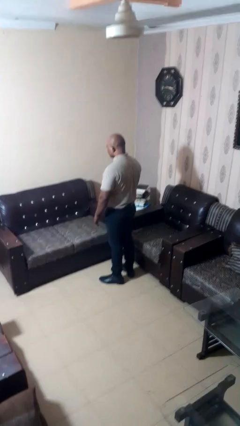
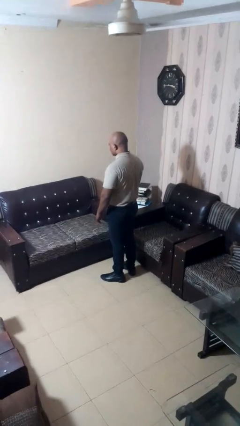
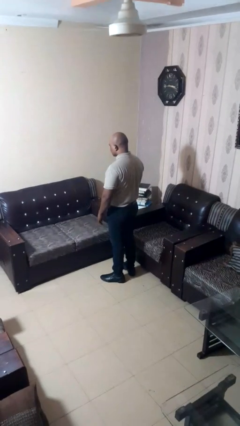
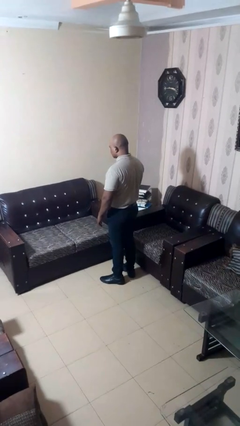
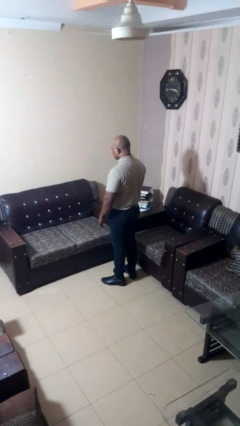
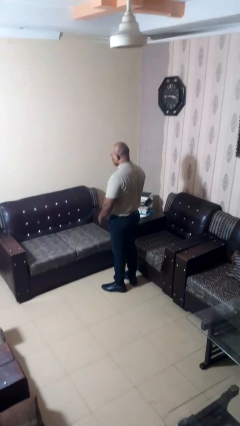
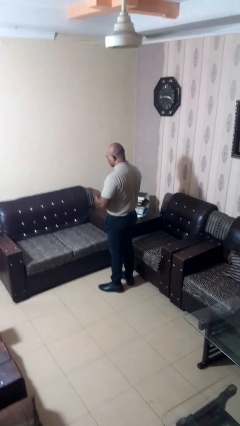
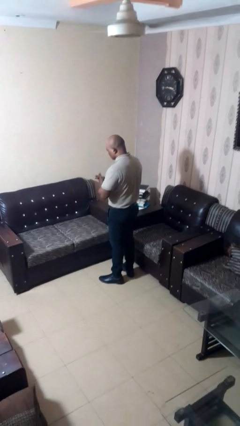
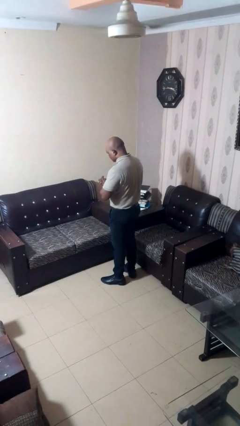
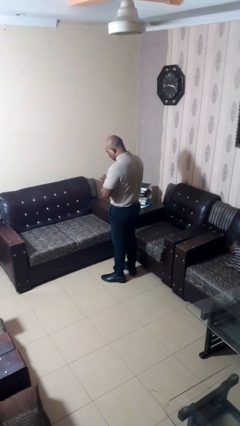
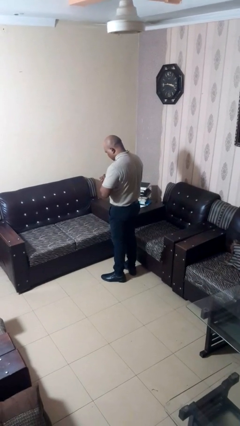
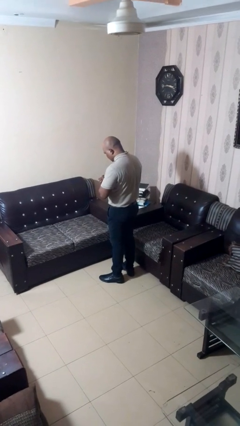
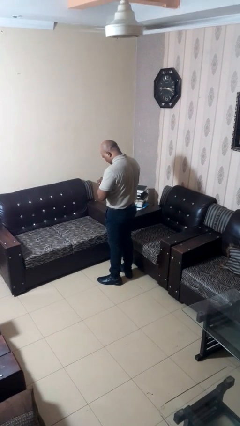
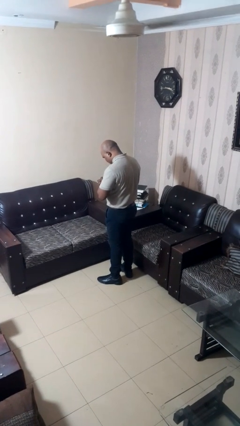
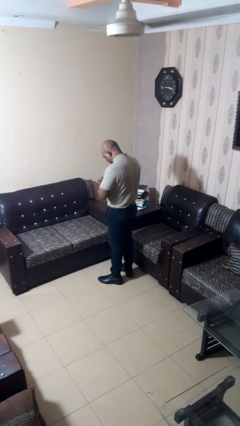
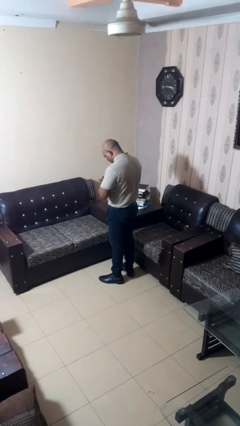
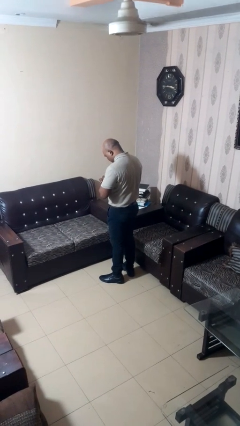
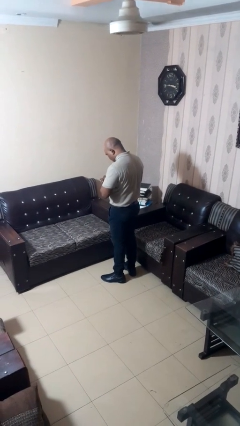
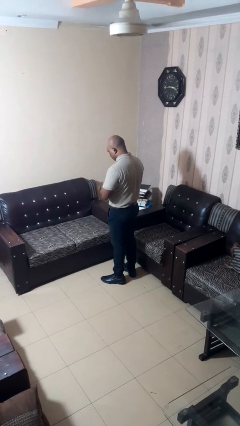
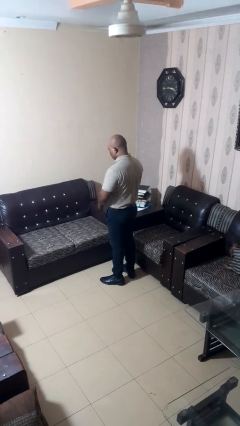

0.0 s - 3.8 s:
person prays

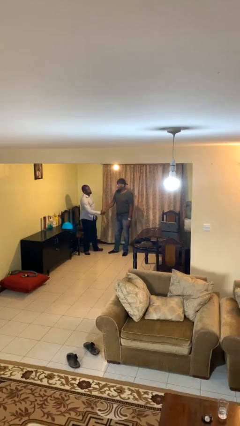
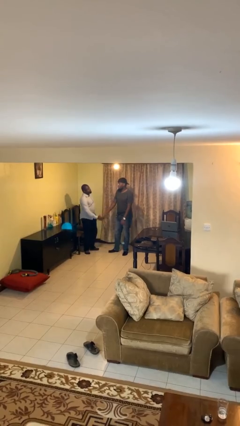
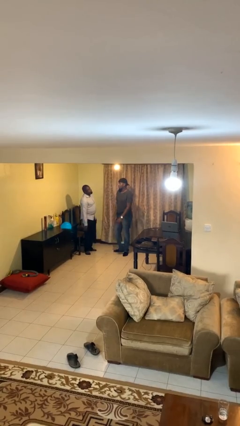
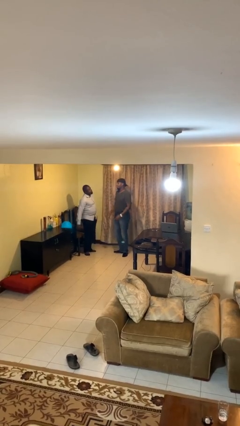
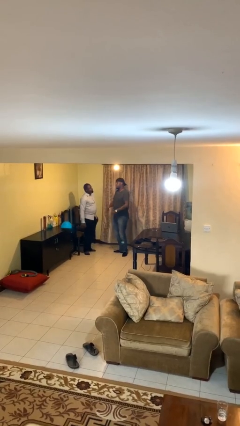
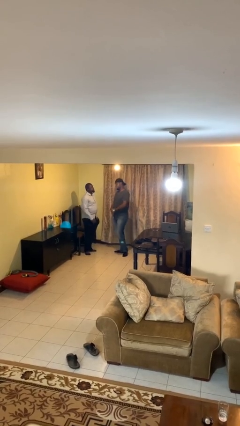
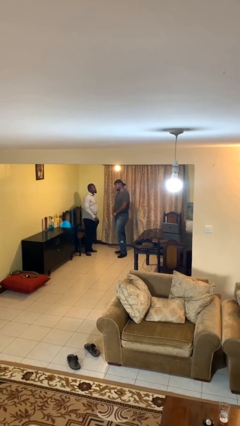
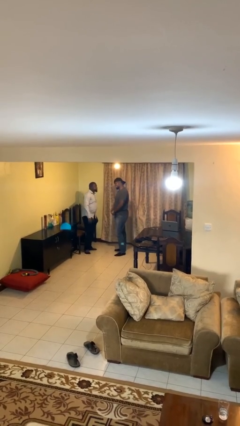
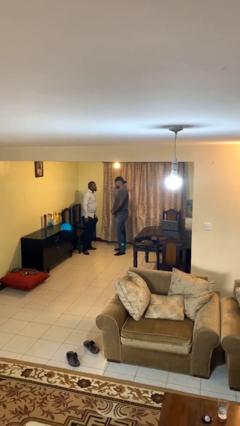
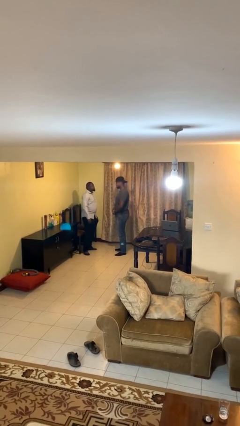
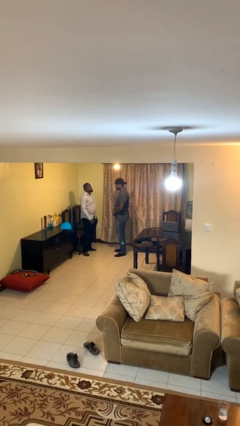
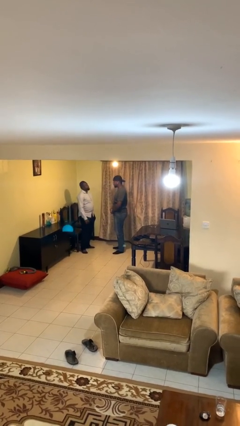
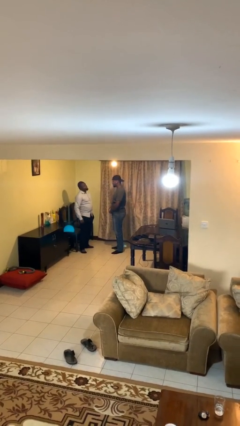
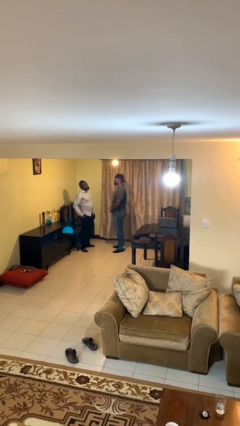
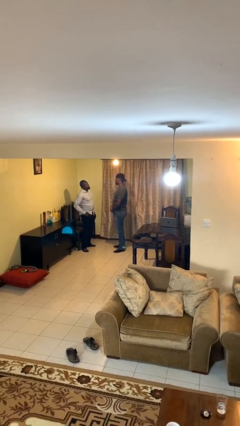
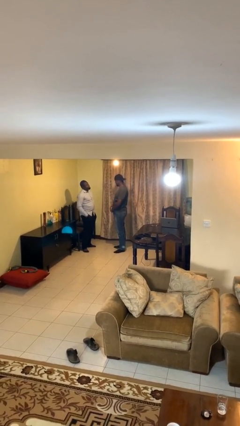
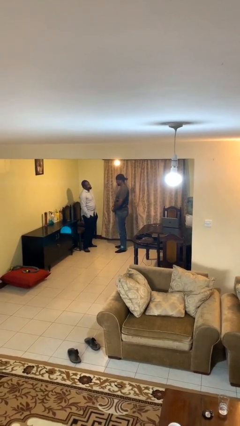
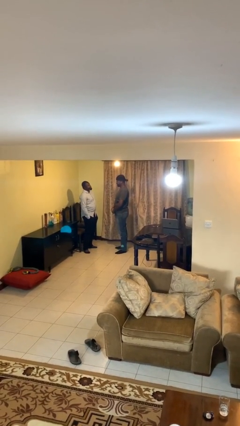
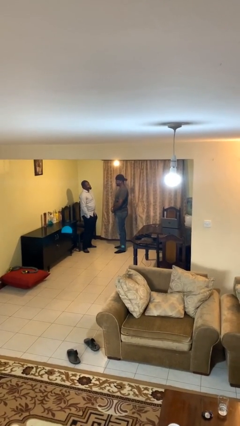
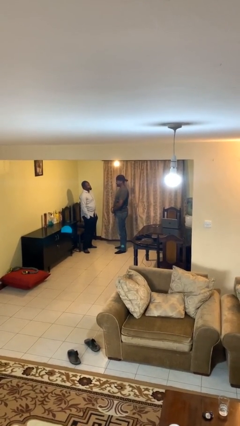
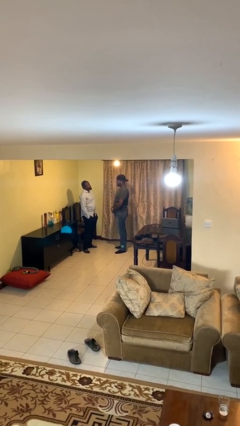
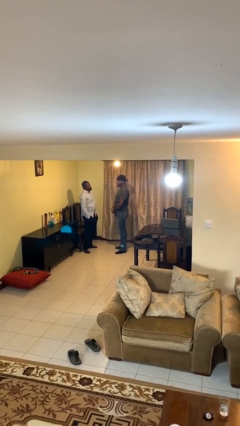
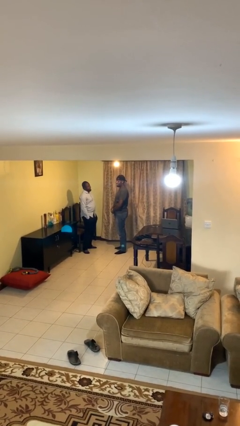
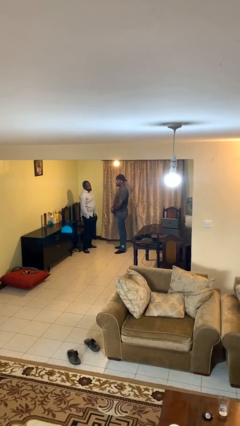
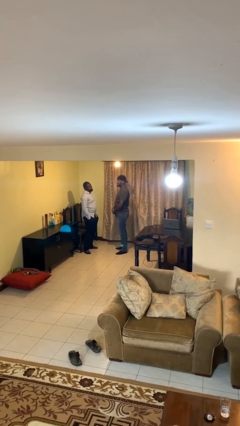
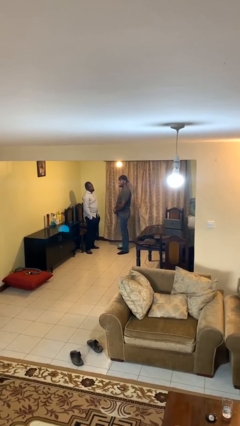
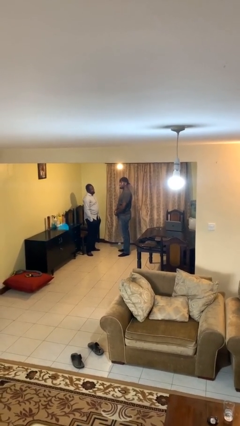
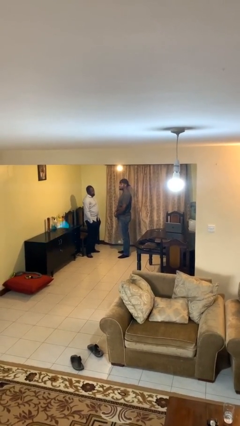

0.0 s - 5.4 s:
person talks to person

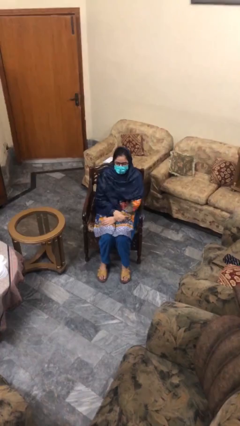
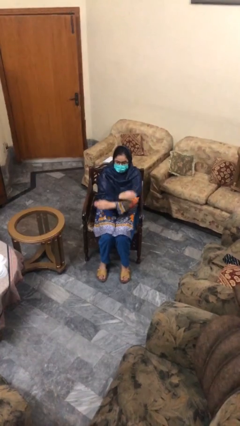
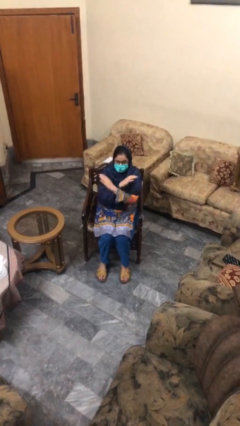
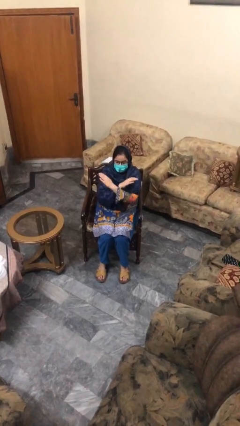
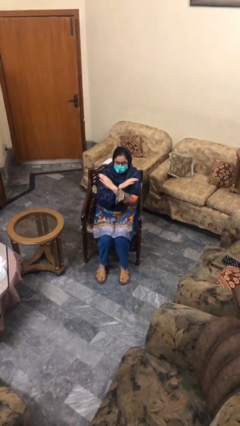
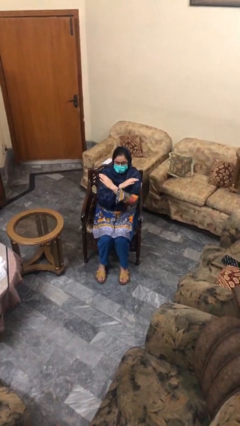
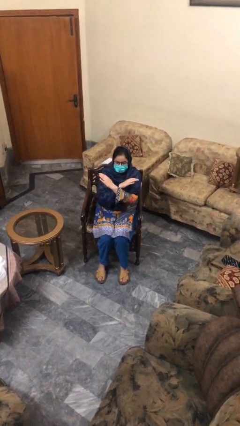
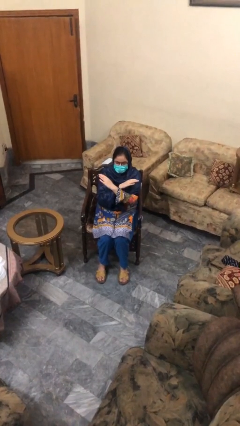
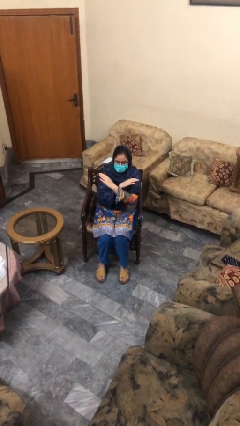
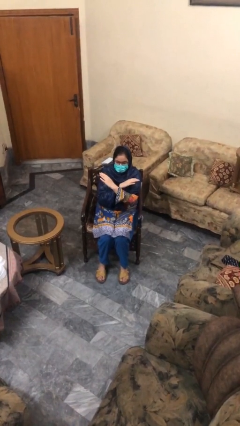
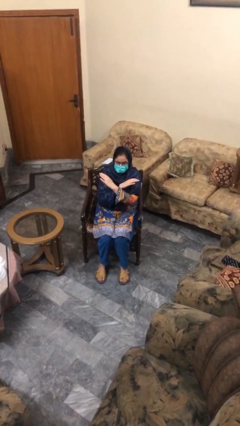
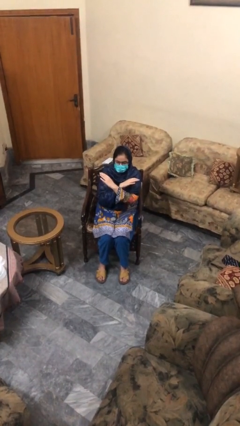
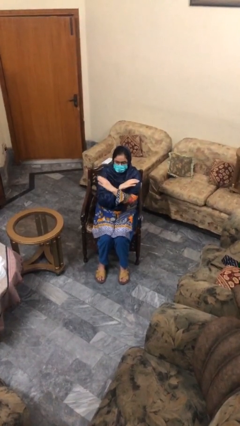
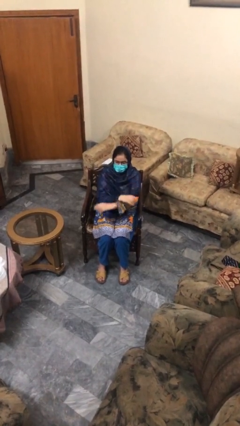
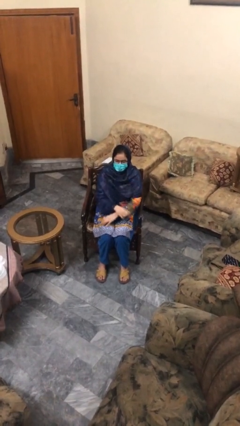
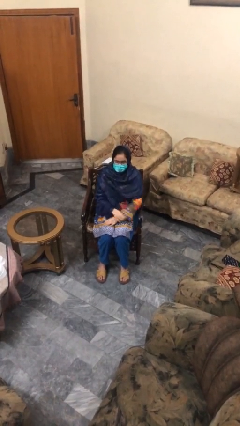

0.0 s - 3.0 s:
person gestures arms x

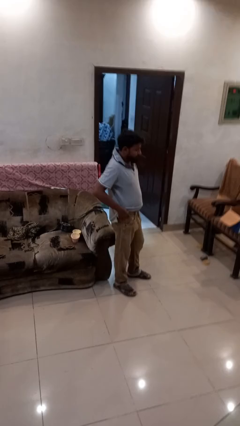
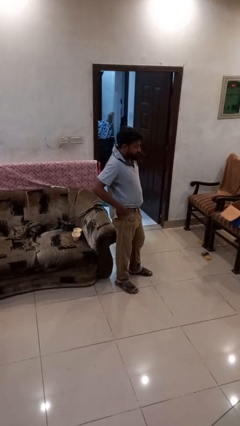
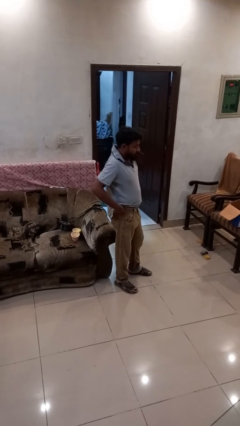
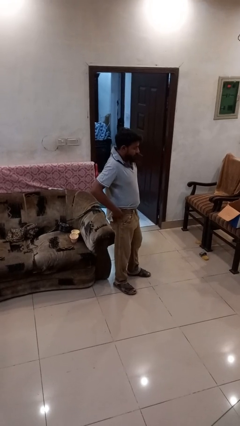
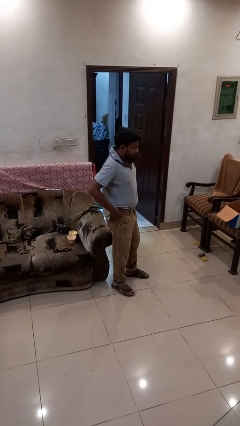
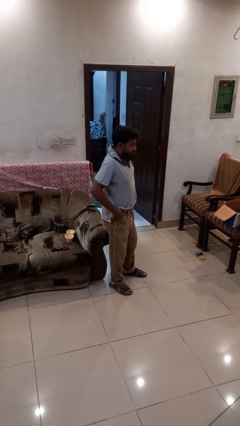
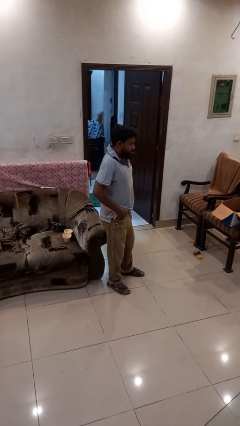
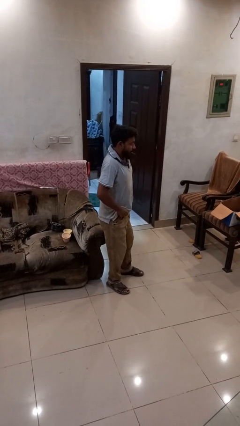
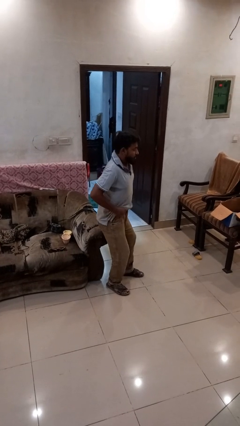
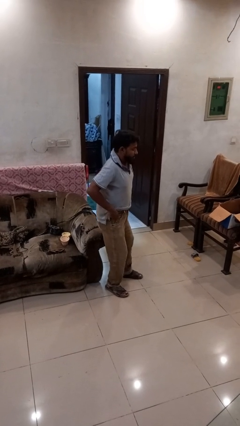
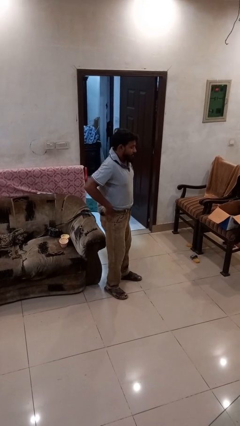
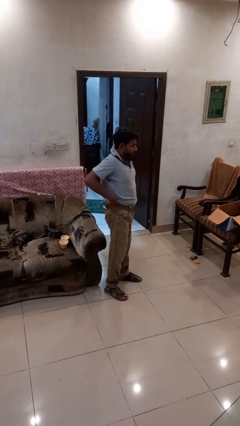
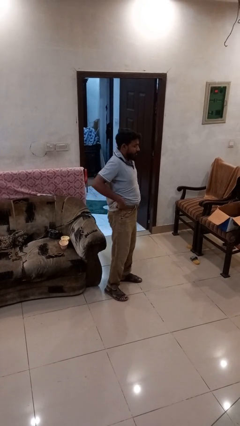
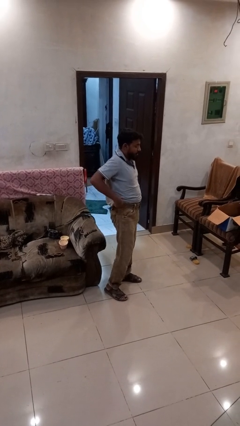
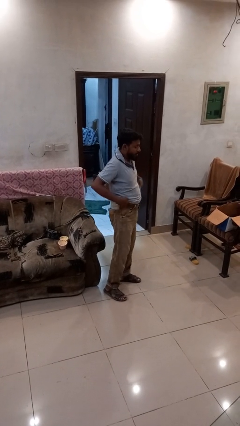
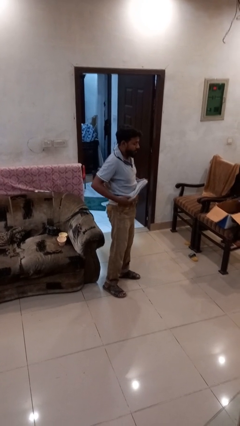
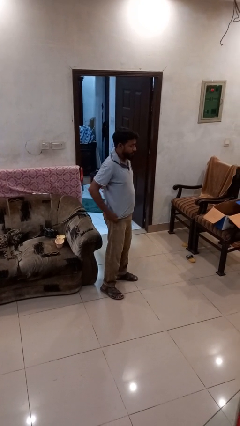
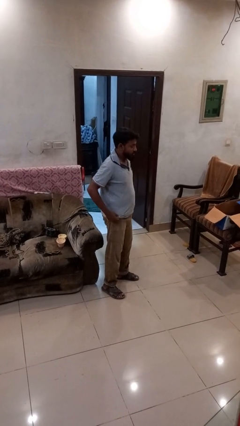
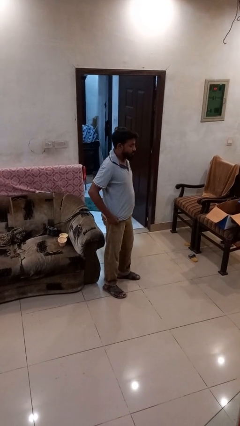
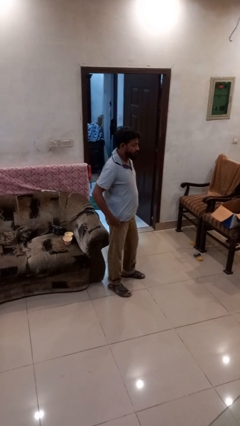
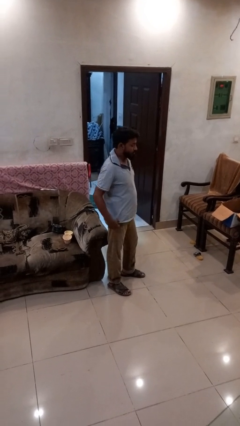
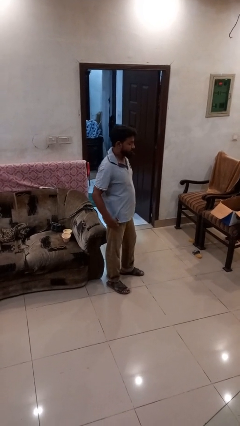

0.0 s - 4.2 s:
person hikes up pants

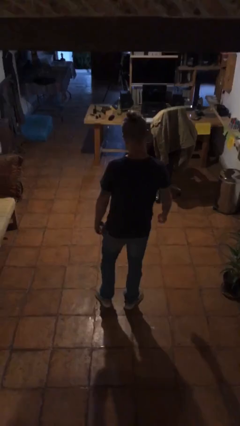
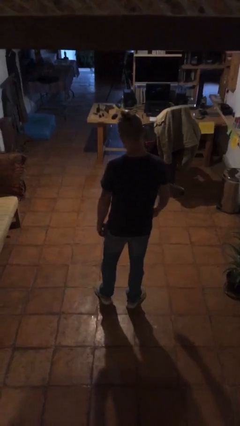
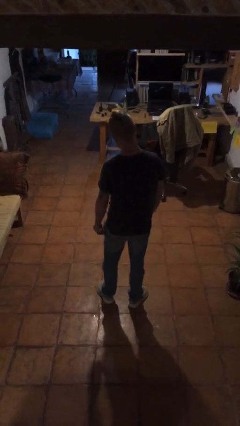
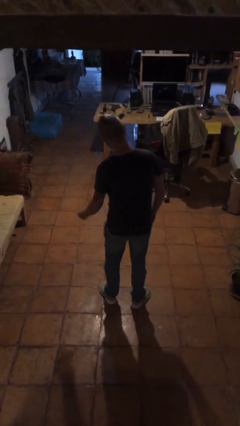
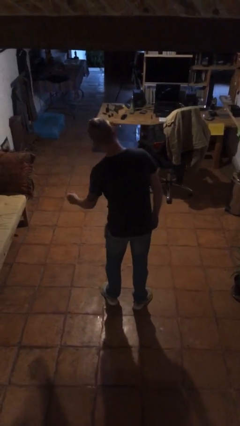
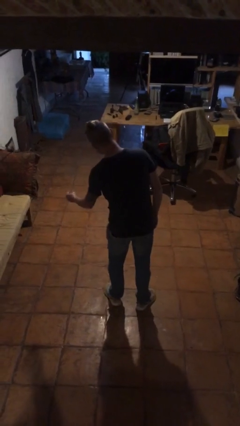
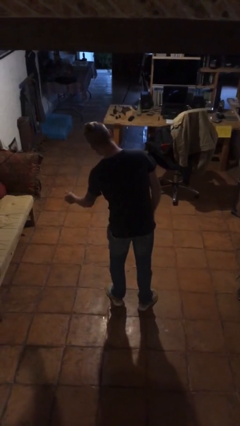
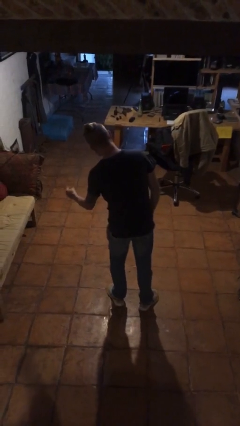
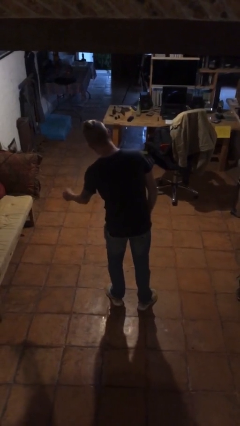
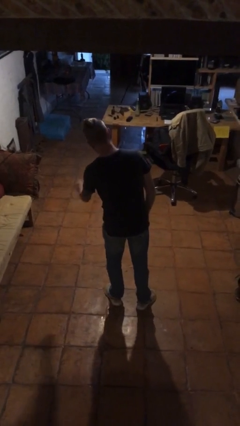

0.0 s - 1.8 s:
person snaps fingers
